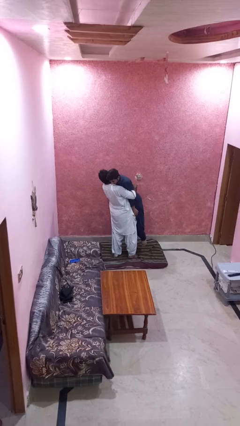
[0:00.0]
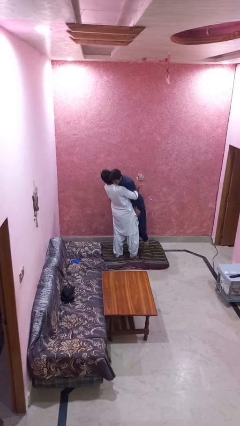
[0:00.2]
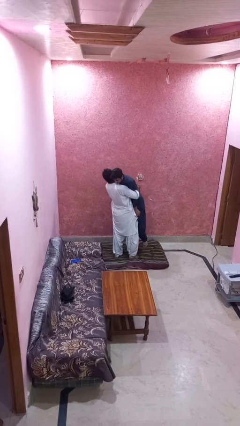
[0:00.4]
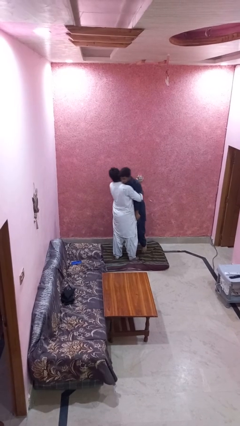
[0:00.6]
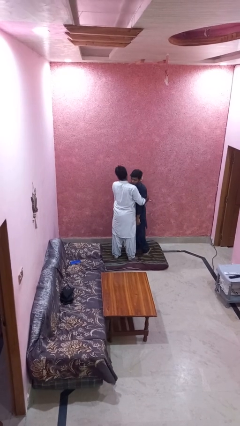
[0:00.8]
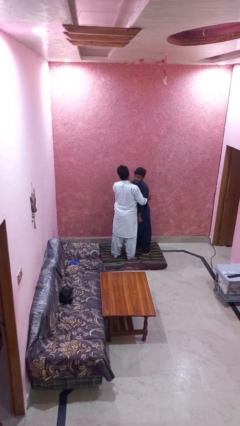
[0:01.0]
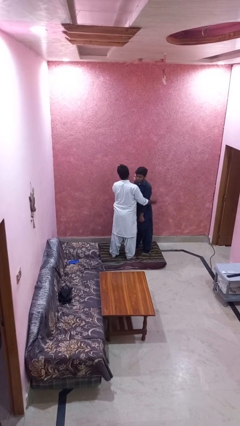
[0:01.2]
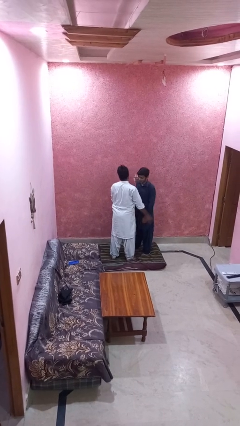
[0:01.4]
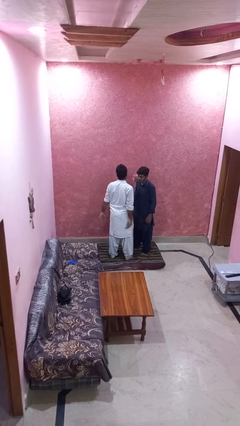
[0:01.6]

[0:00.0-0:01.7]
person puts down person

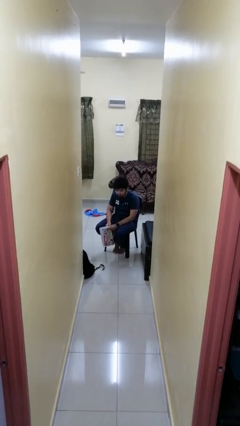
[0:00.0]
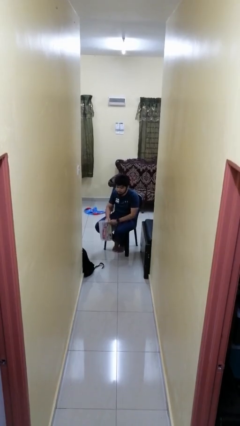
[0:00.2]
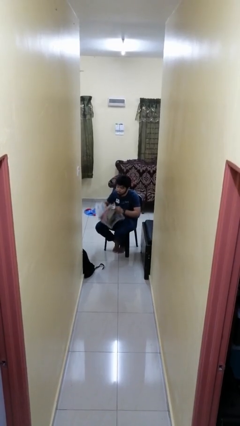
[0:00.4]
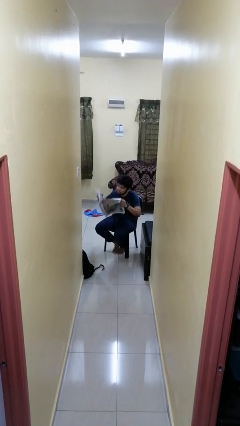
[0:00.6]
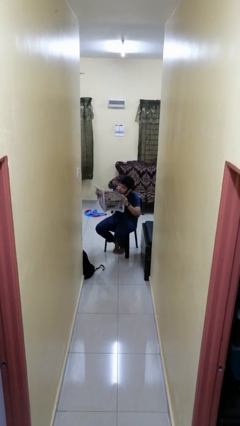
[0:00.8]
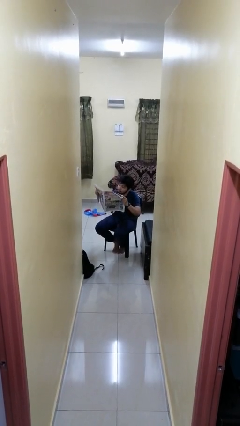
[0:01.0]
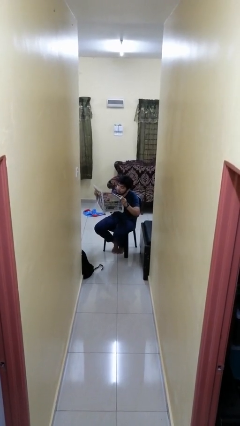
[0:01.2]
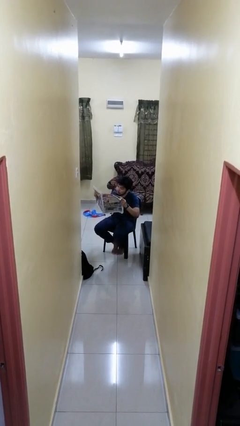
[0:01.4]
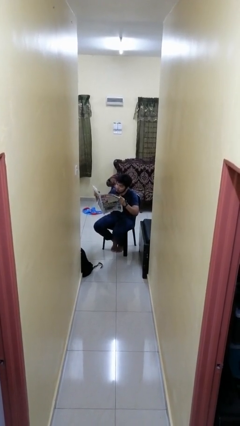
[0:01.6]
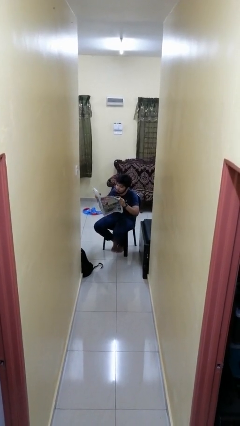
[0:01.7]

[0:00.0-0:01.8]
person reads newspaper

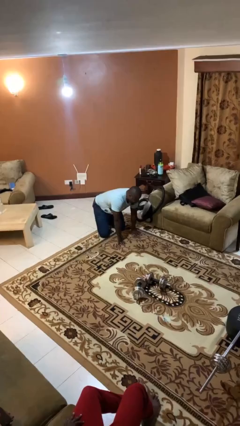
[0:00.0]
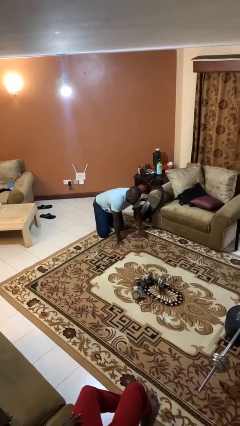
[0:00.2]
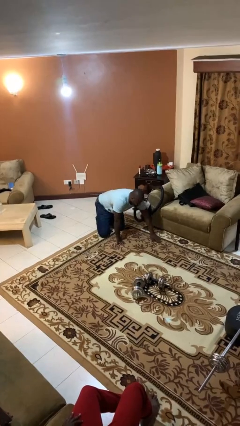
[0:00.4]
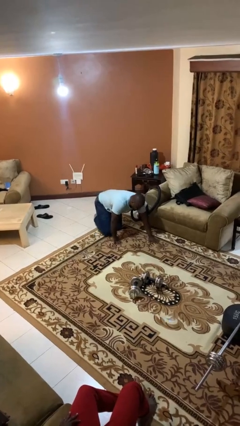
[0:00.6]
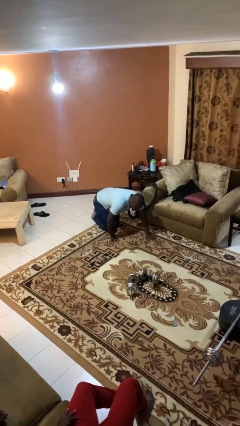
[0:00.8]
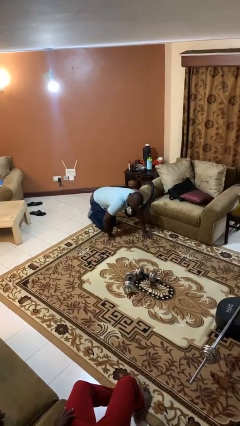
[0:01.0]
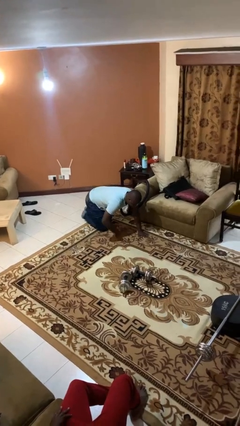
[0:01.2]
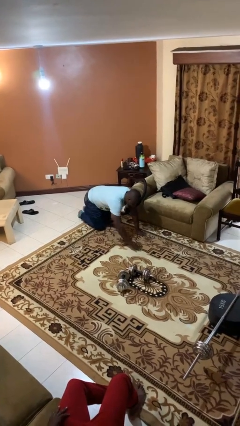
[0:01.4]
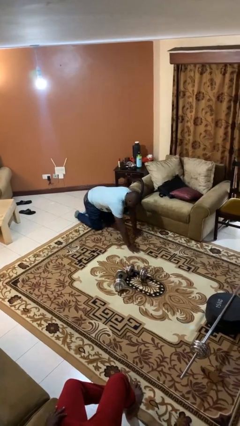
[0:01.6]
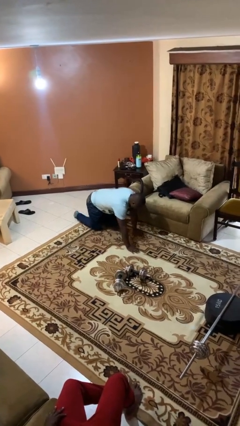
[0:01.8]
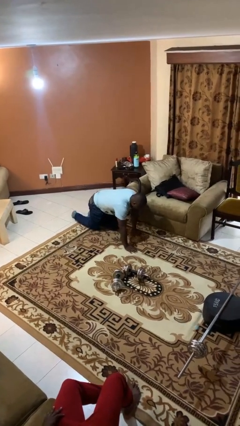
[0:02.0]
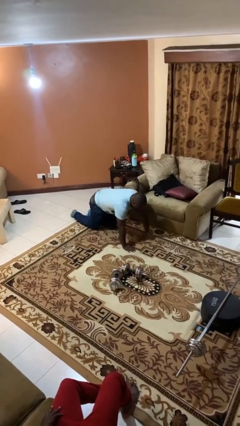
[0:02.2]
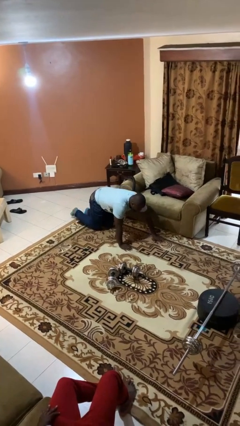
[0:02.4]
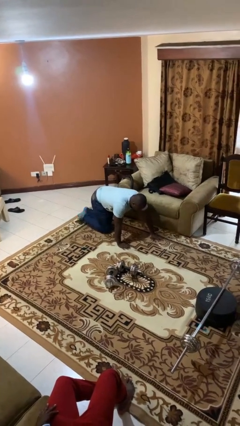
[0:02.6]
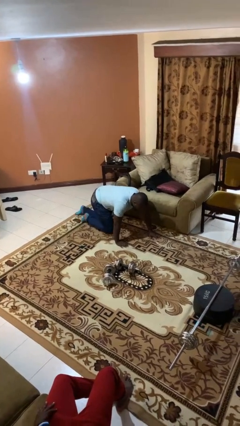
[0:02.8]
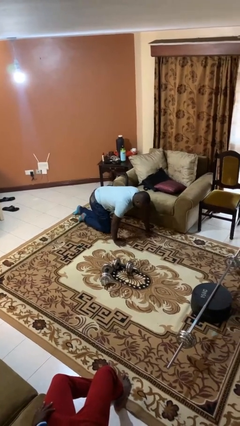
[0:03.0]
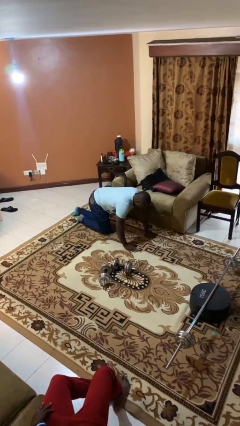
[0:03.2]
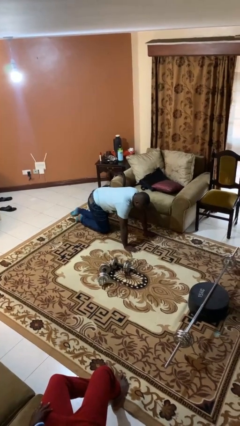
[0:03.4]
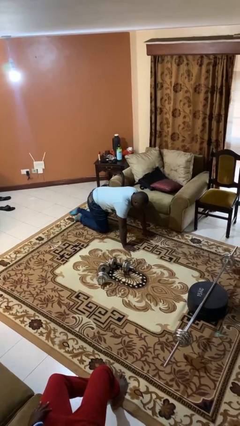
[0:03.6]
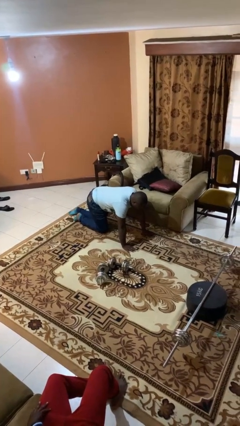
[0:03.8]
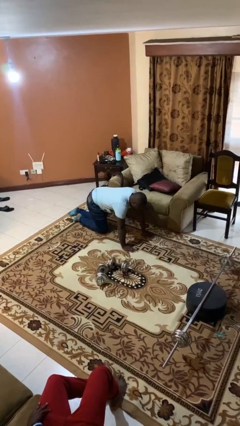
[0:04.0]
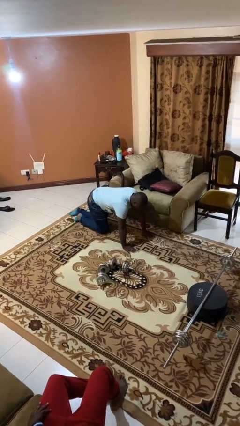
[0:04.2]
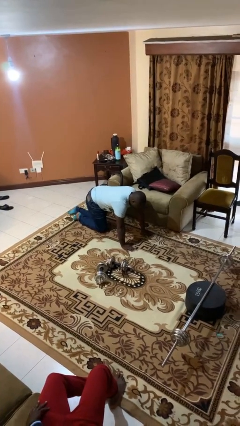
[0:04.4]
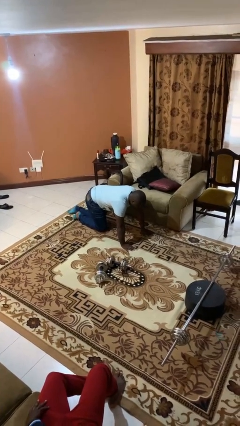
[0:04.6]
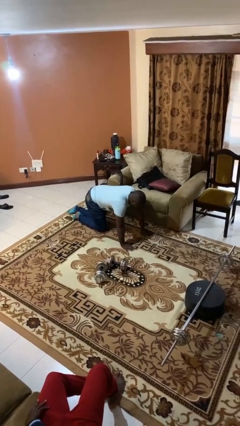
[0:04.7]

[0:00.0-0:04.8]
person crawls

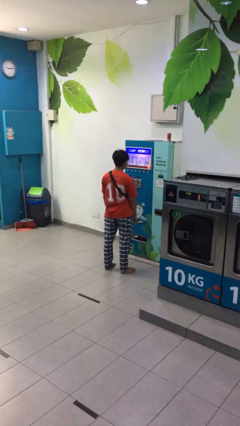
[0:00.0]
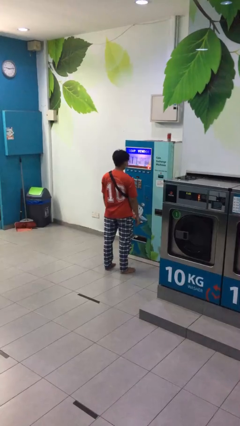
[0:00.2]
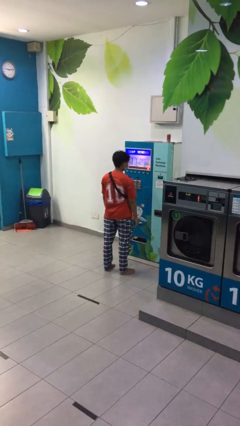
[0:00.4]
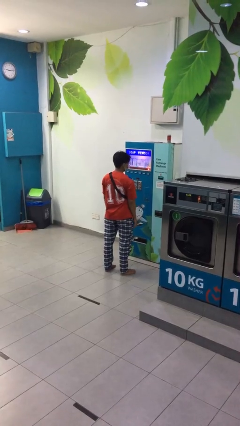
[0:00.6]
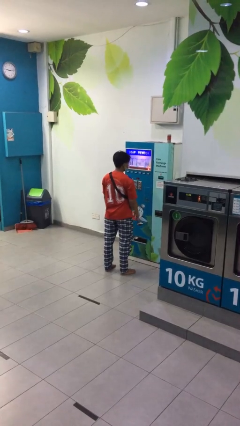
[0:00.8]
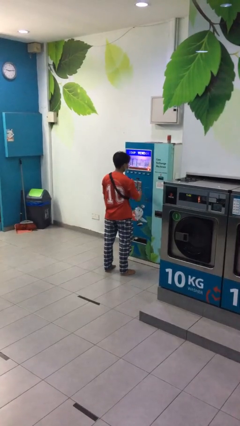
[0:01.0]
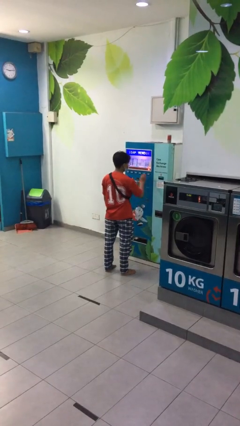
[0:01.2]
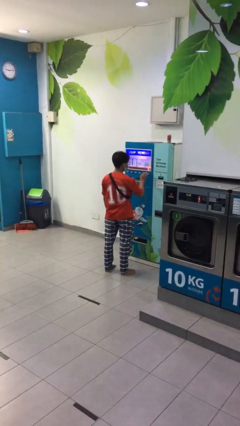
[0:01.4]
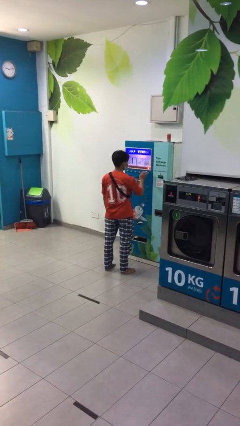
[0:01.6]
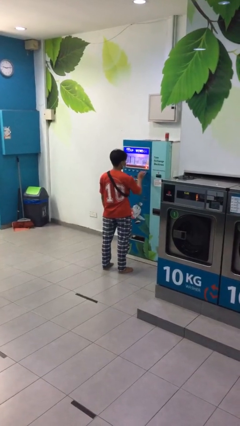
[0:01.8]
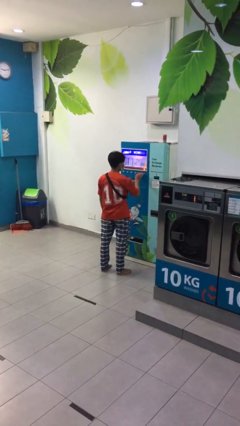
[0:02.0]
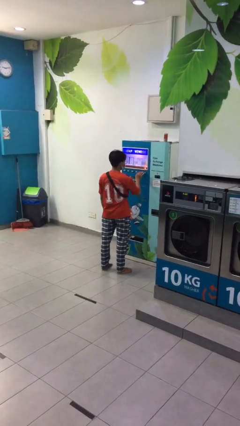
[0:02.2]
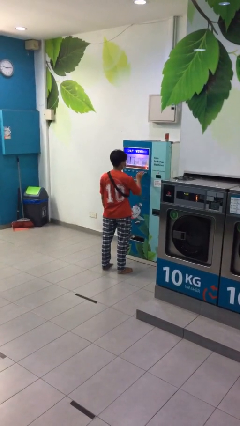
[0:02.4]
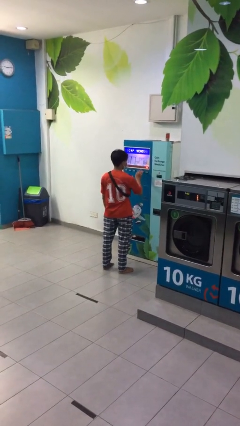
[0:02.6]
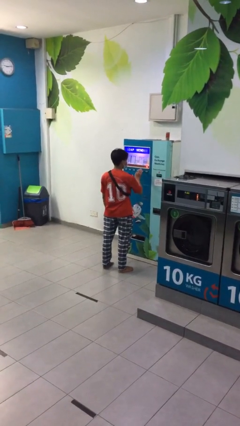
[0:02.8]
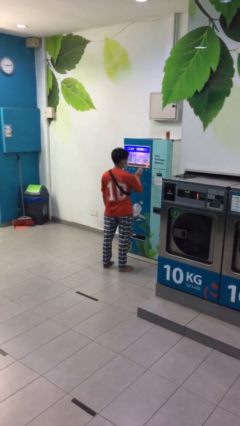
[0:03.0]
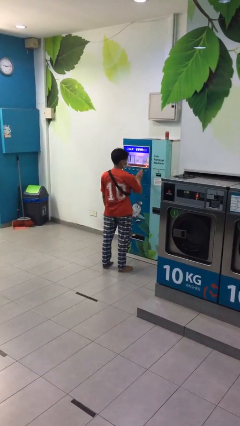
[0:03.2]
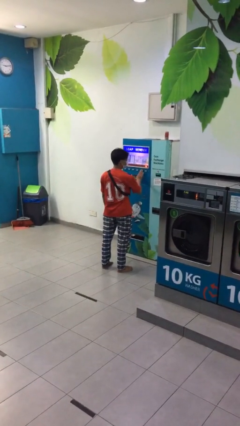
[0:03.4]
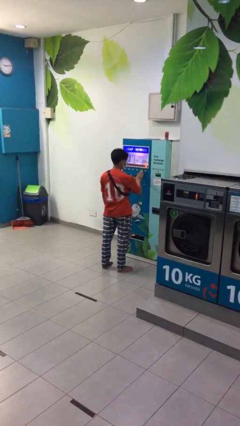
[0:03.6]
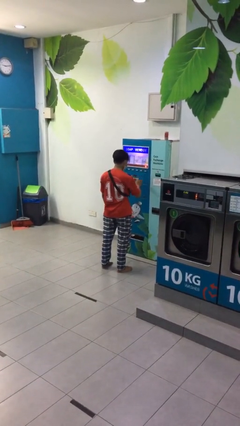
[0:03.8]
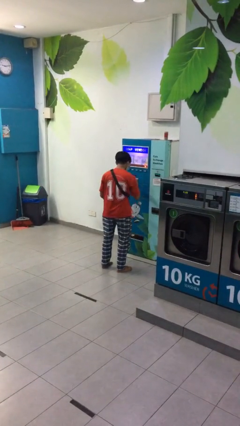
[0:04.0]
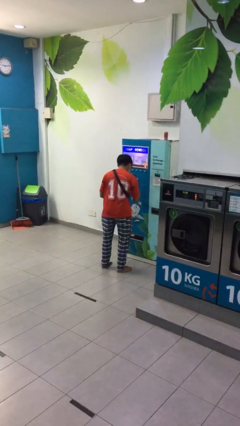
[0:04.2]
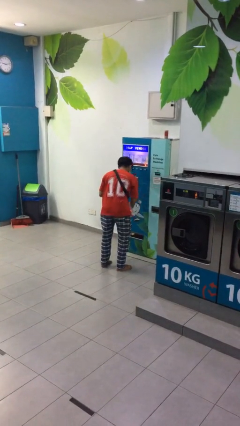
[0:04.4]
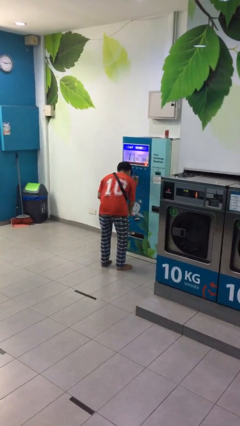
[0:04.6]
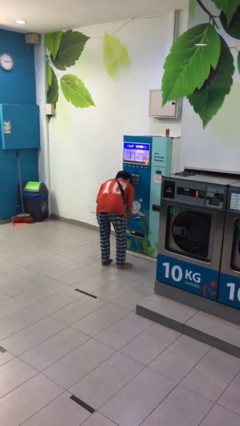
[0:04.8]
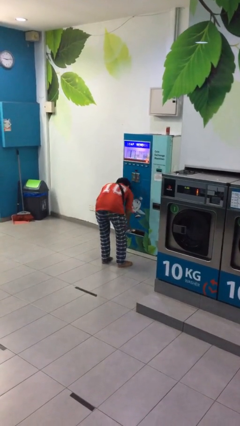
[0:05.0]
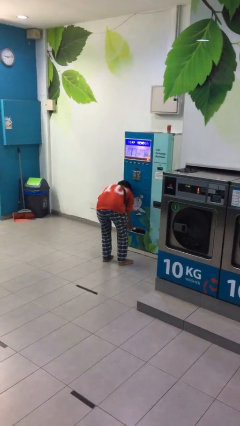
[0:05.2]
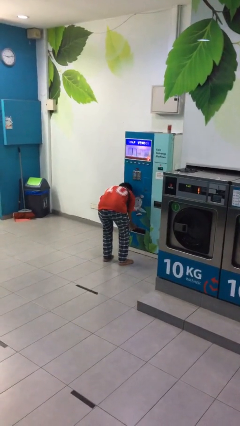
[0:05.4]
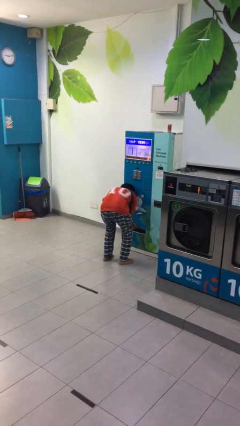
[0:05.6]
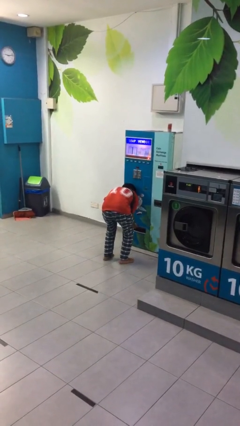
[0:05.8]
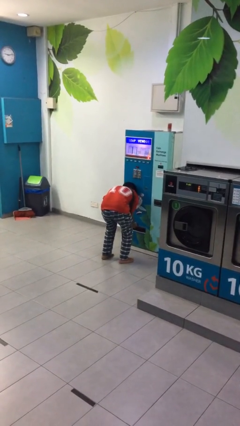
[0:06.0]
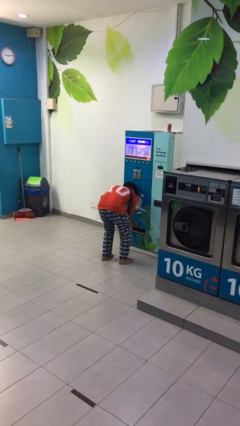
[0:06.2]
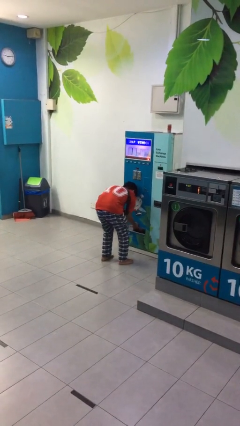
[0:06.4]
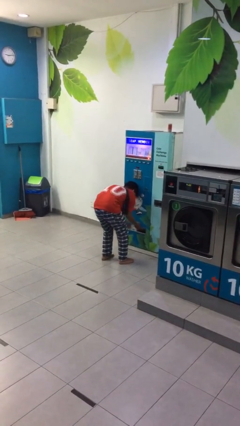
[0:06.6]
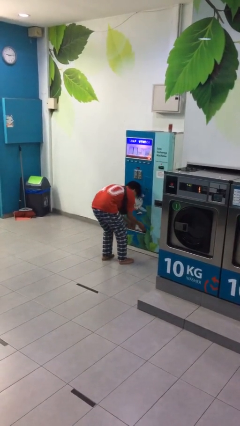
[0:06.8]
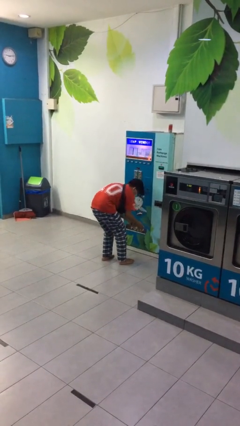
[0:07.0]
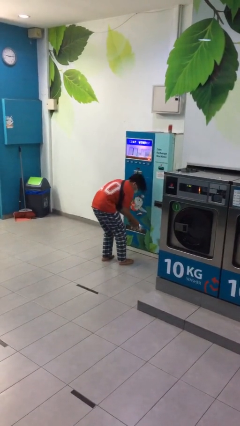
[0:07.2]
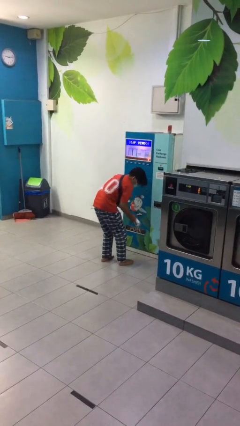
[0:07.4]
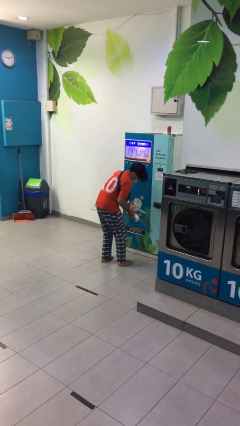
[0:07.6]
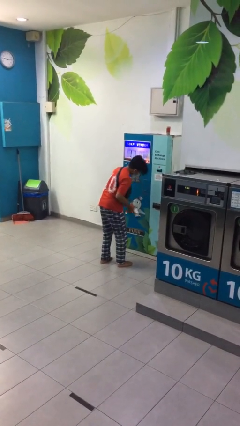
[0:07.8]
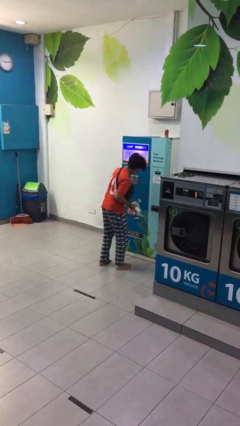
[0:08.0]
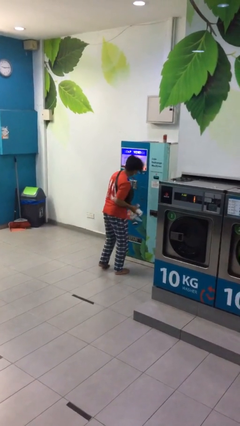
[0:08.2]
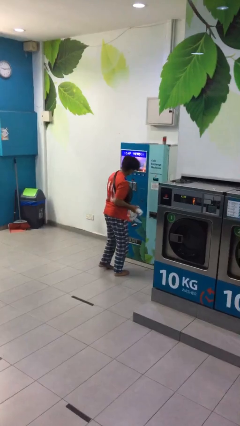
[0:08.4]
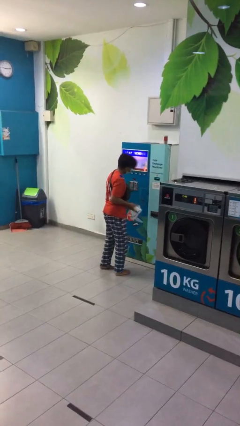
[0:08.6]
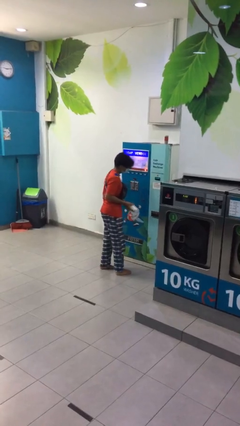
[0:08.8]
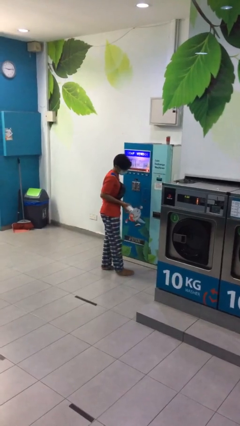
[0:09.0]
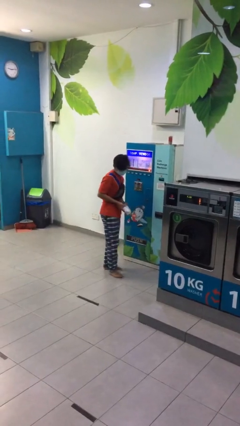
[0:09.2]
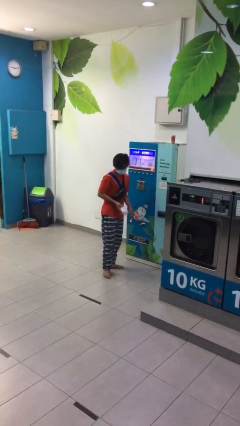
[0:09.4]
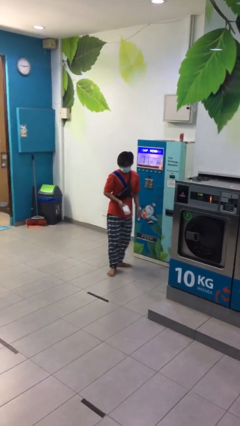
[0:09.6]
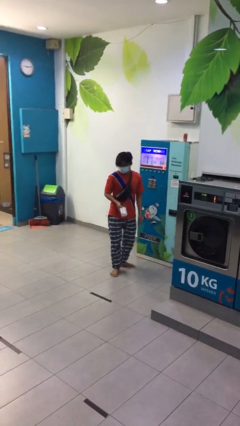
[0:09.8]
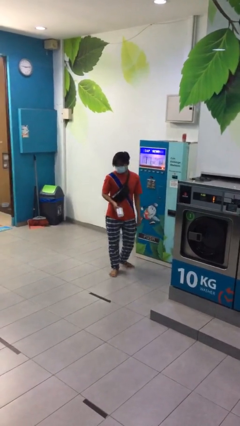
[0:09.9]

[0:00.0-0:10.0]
person purchases from machine
